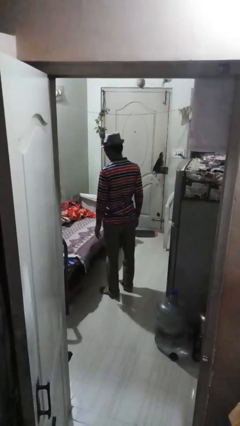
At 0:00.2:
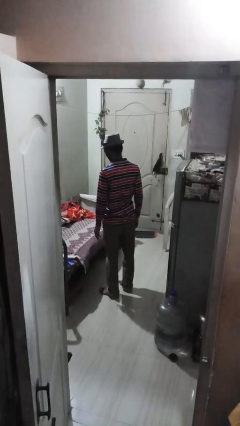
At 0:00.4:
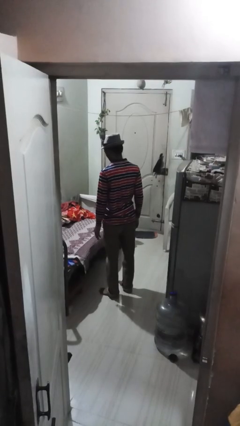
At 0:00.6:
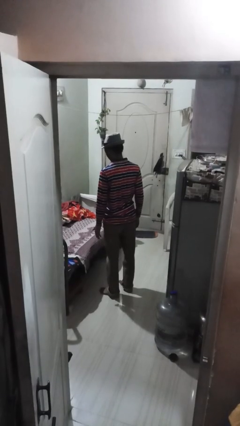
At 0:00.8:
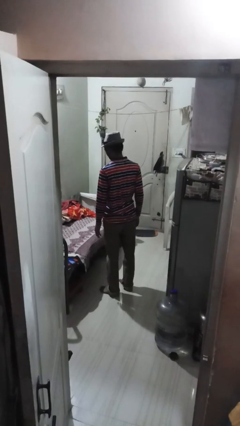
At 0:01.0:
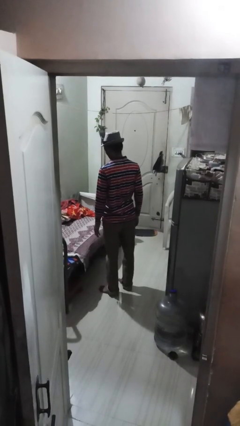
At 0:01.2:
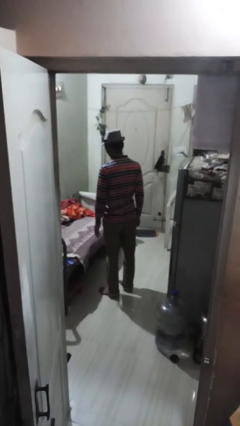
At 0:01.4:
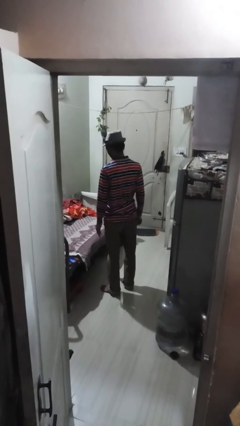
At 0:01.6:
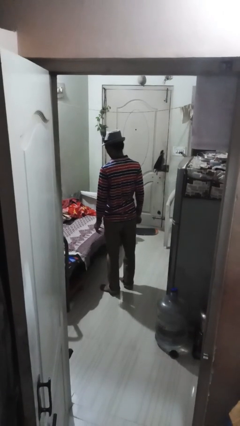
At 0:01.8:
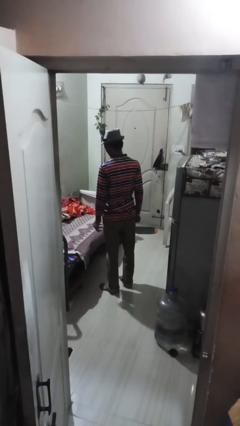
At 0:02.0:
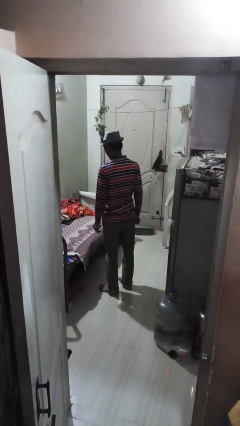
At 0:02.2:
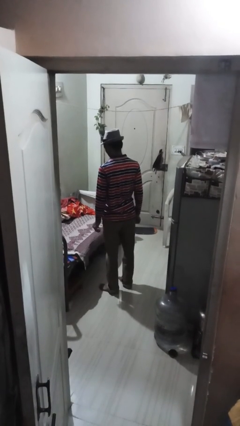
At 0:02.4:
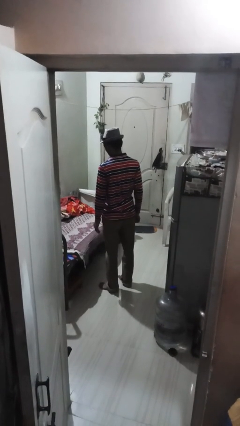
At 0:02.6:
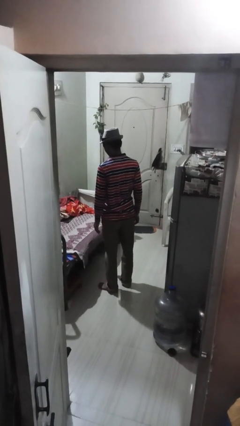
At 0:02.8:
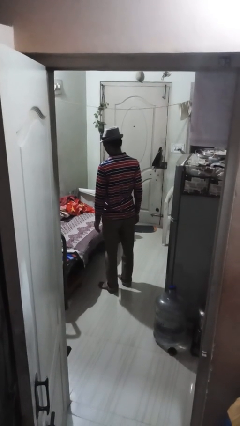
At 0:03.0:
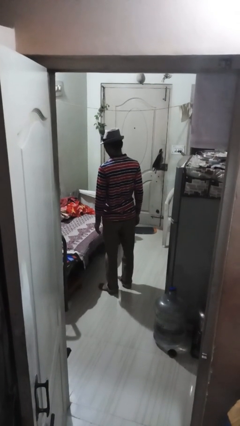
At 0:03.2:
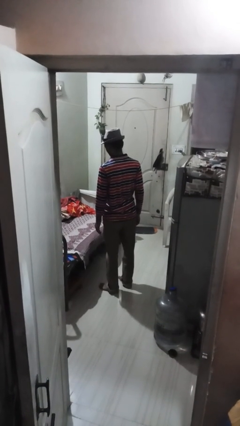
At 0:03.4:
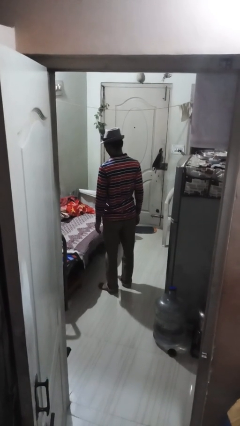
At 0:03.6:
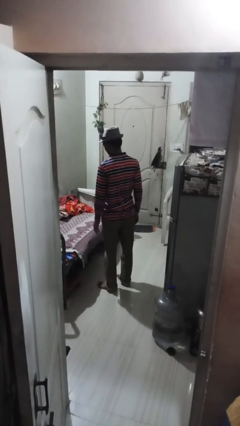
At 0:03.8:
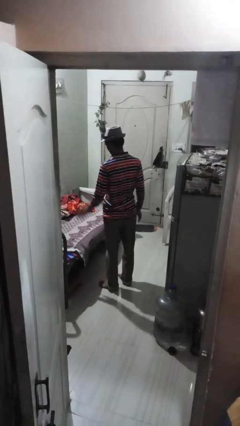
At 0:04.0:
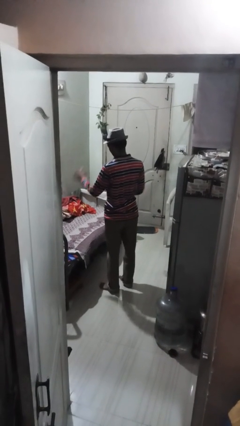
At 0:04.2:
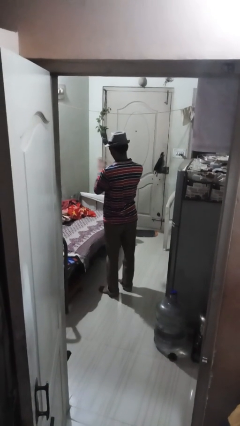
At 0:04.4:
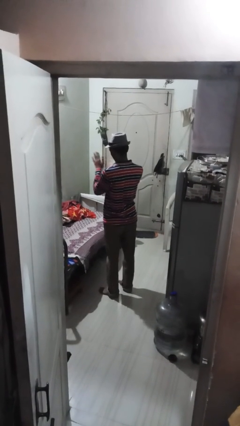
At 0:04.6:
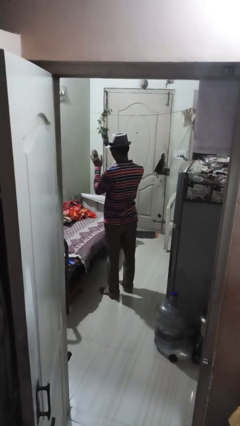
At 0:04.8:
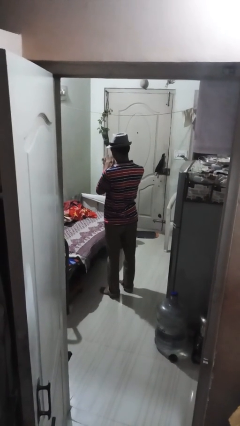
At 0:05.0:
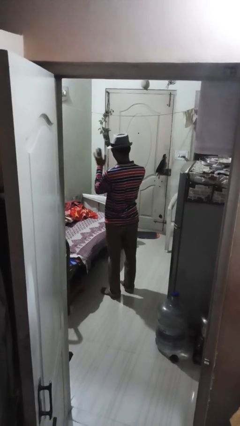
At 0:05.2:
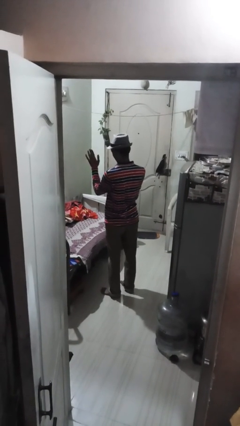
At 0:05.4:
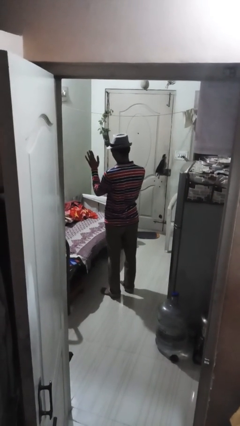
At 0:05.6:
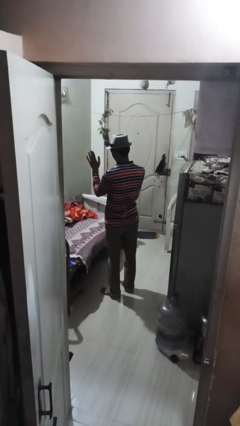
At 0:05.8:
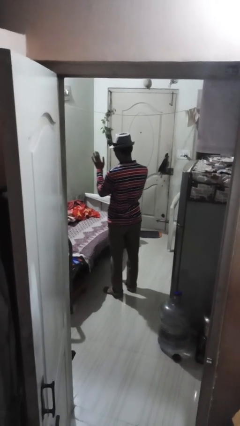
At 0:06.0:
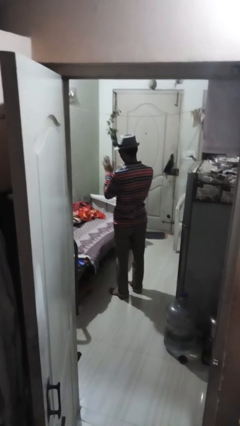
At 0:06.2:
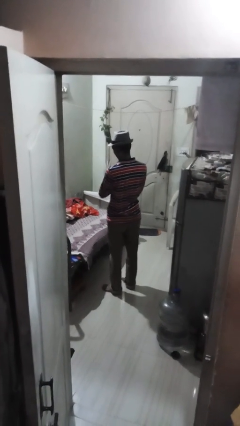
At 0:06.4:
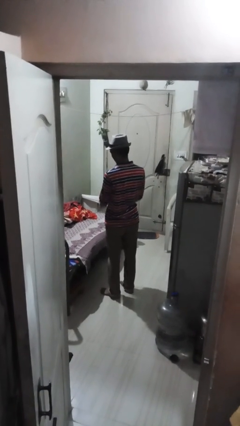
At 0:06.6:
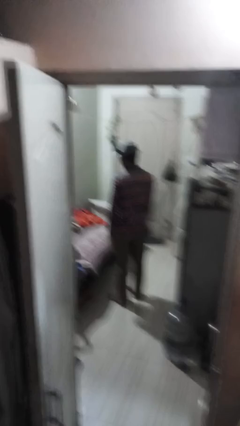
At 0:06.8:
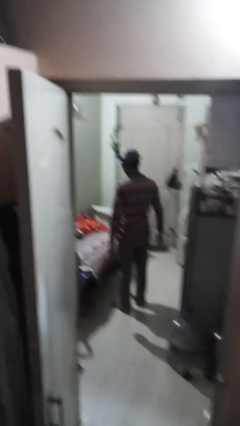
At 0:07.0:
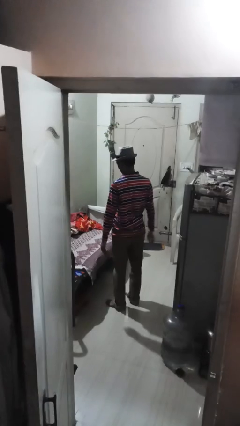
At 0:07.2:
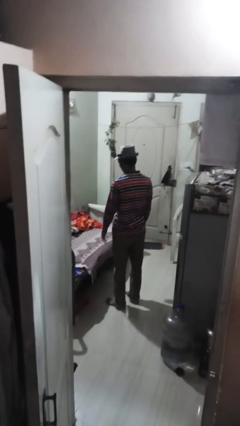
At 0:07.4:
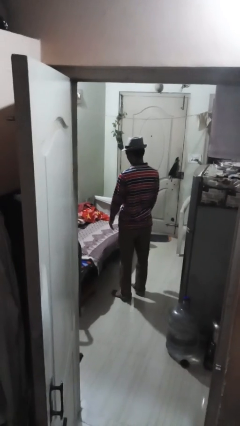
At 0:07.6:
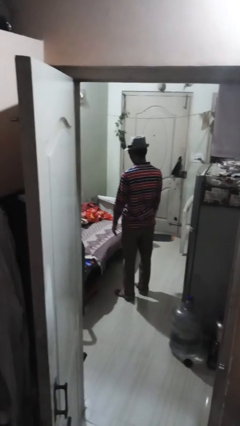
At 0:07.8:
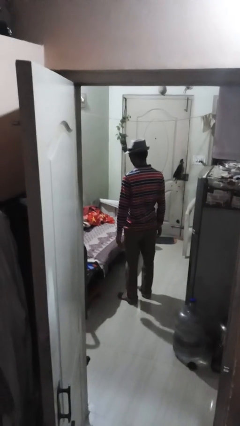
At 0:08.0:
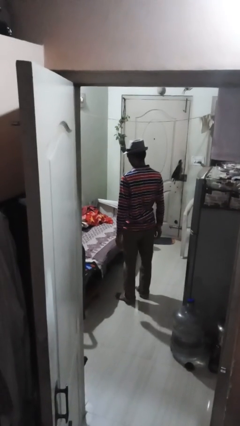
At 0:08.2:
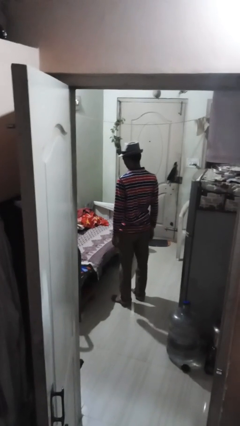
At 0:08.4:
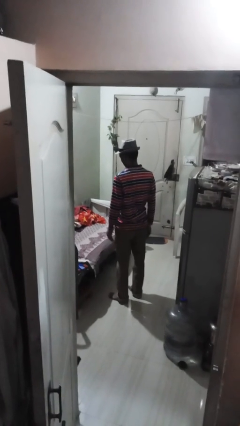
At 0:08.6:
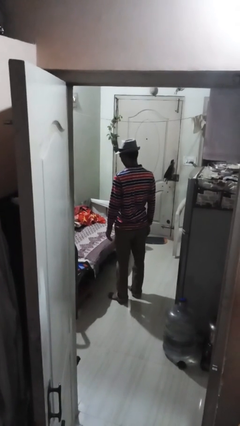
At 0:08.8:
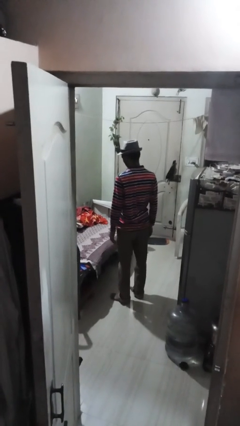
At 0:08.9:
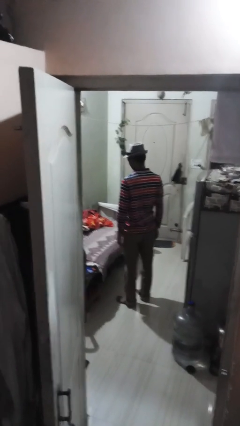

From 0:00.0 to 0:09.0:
person claps hands

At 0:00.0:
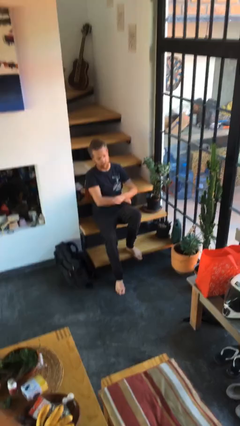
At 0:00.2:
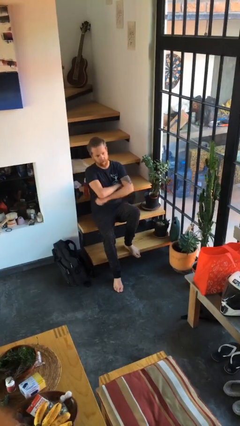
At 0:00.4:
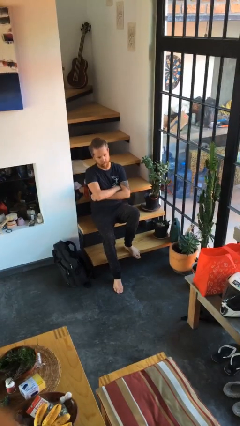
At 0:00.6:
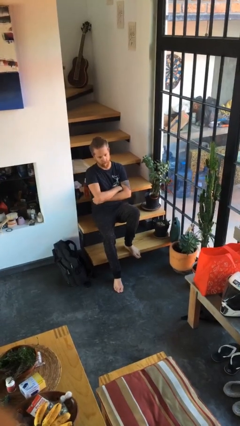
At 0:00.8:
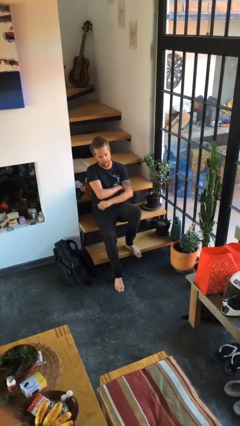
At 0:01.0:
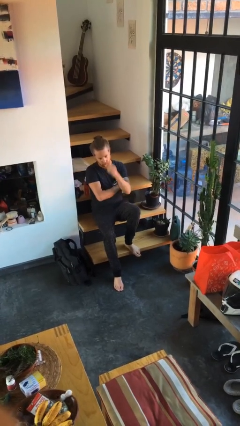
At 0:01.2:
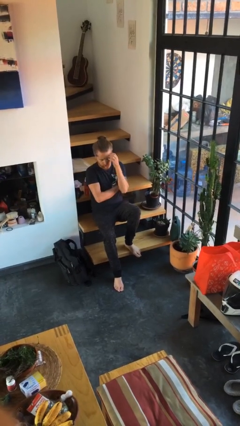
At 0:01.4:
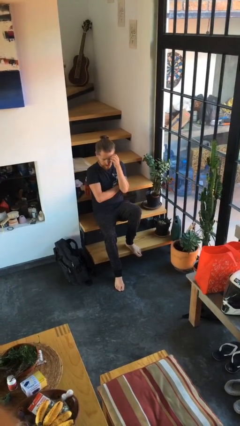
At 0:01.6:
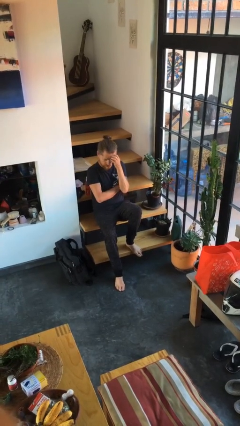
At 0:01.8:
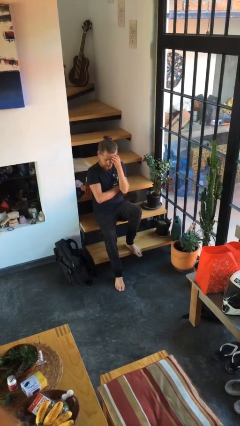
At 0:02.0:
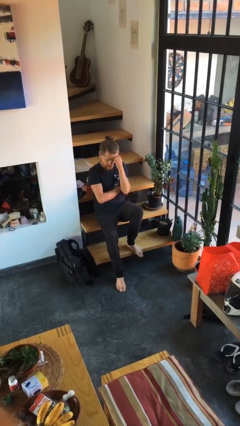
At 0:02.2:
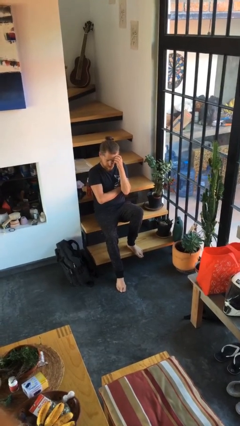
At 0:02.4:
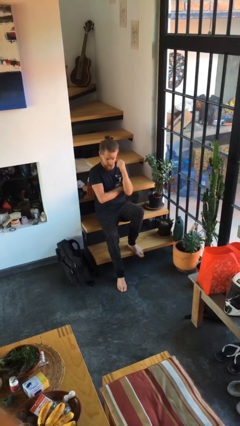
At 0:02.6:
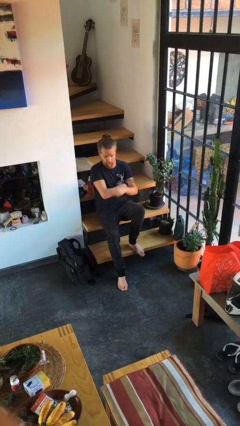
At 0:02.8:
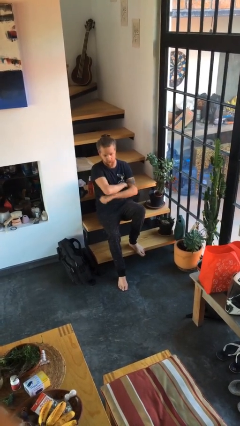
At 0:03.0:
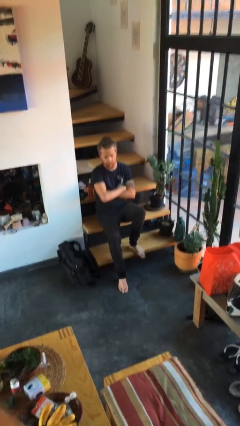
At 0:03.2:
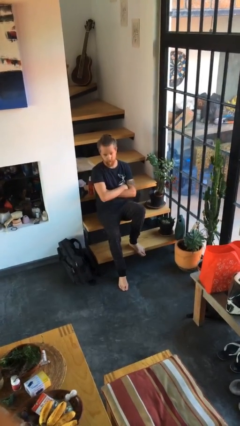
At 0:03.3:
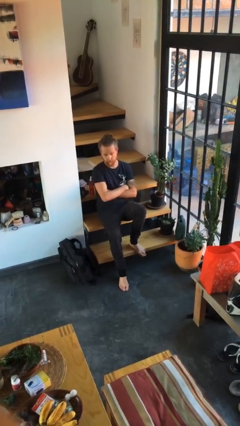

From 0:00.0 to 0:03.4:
person scratches face

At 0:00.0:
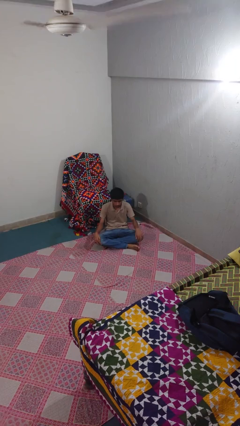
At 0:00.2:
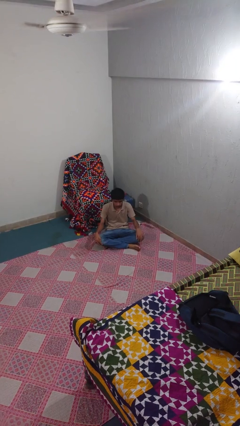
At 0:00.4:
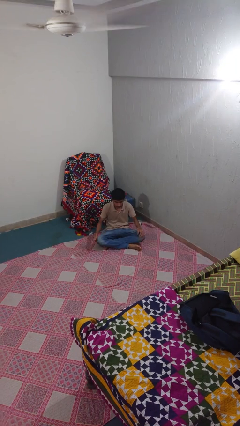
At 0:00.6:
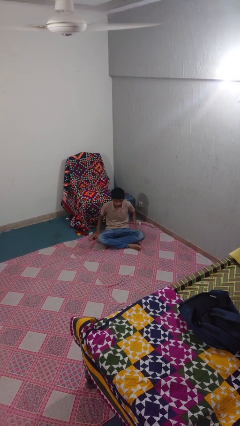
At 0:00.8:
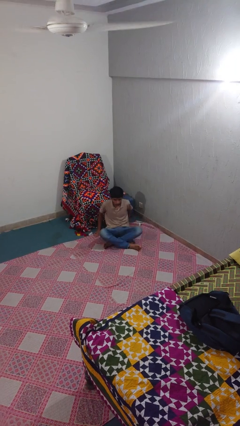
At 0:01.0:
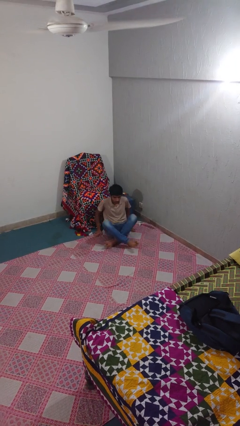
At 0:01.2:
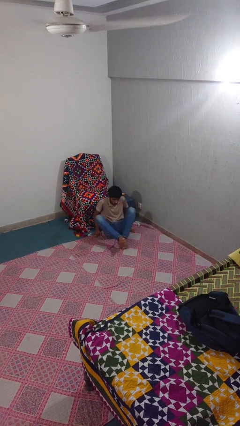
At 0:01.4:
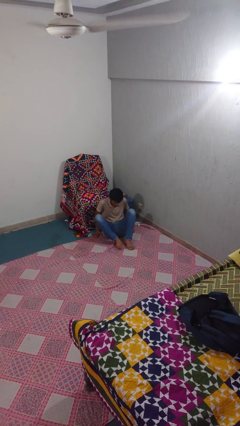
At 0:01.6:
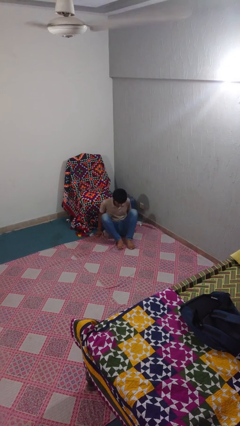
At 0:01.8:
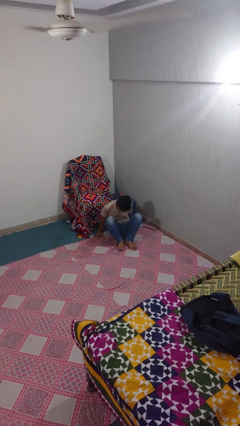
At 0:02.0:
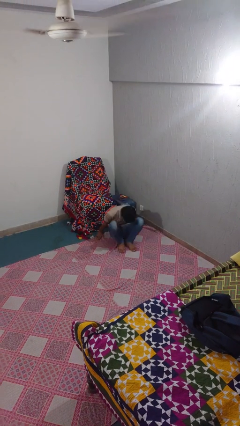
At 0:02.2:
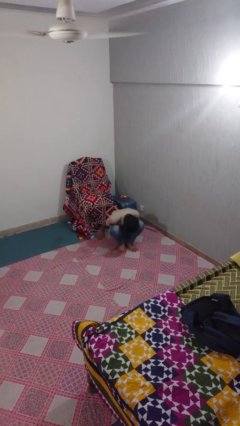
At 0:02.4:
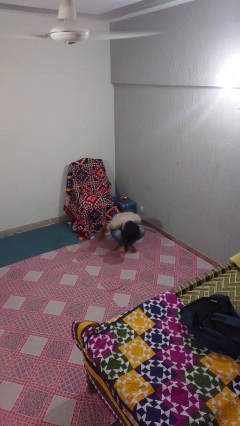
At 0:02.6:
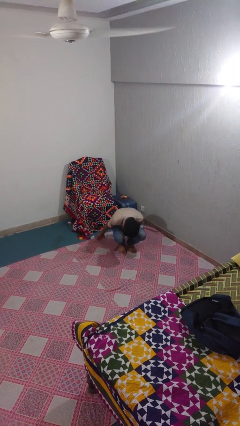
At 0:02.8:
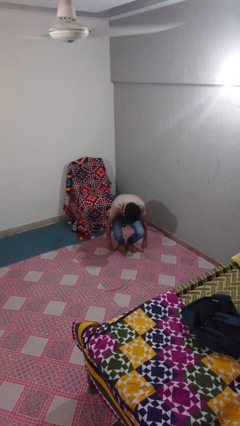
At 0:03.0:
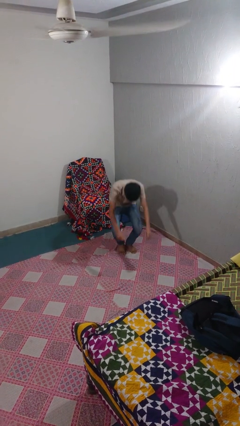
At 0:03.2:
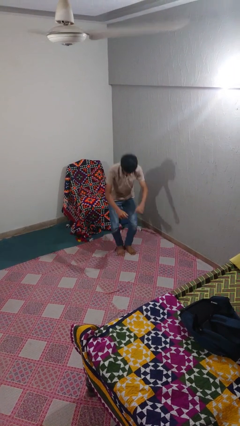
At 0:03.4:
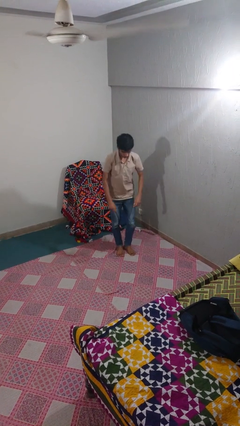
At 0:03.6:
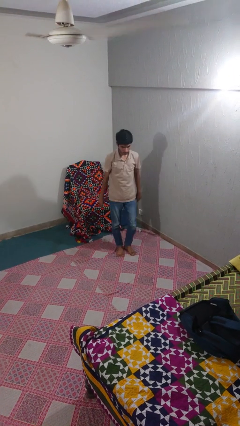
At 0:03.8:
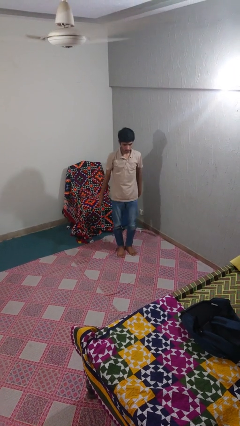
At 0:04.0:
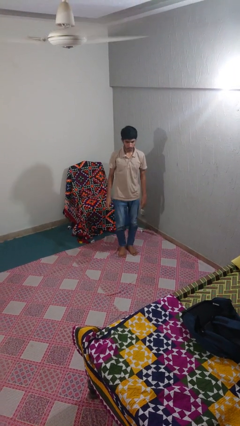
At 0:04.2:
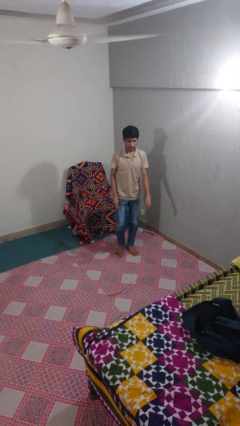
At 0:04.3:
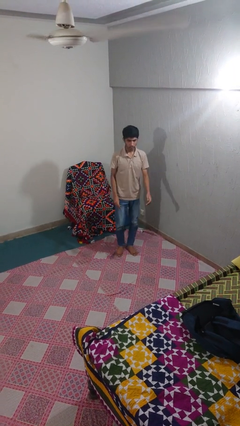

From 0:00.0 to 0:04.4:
person stands up from floor

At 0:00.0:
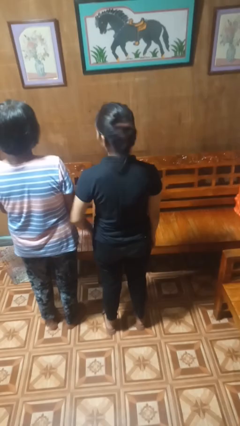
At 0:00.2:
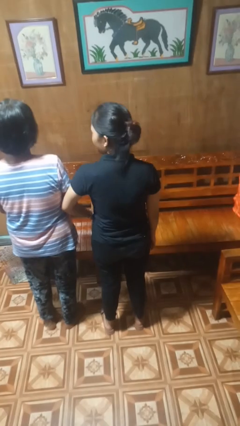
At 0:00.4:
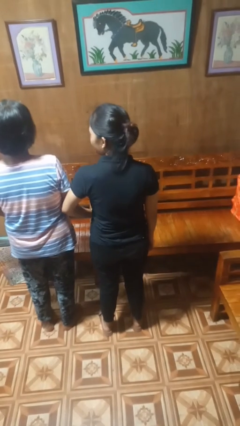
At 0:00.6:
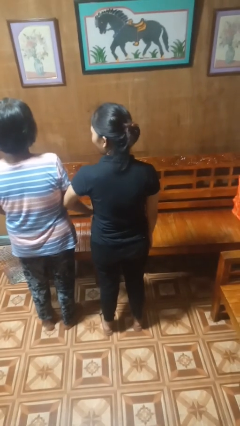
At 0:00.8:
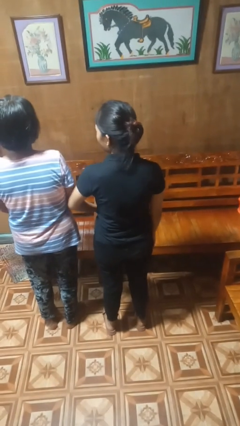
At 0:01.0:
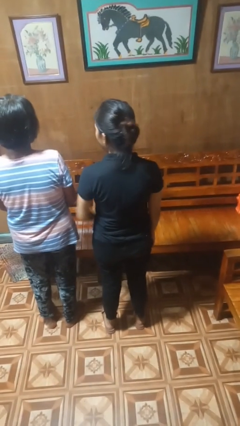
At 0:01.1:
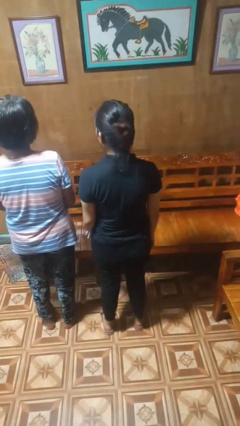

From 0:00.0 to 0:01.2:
person nudges person with elbow
